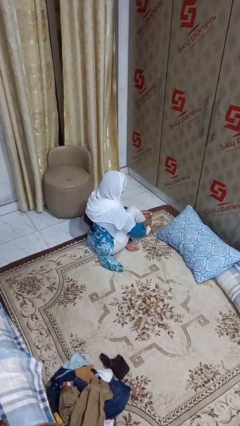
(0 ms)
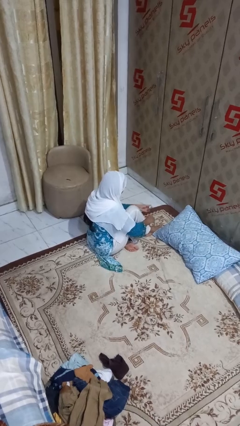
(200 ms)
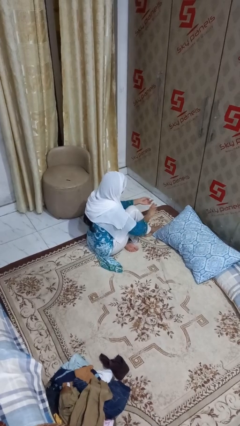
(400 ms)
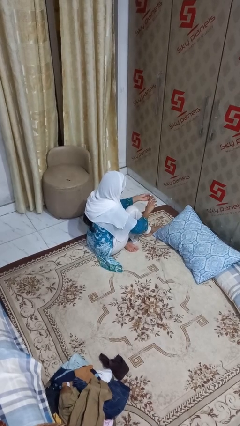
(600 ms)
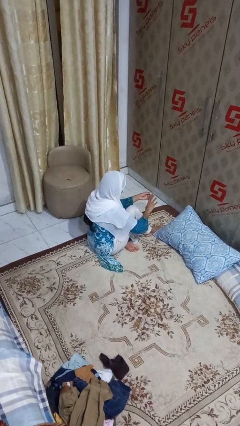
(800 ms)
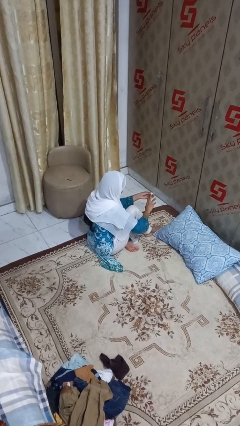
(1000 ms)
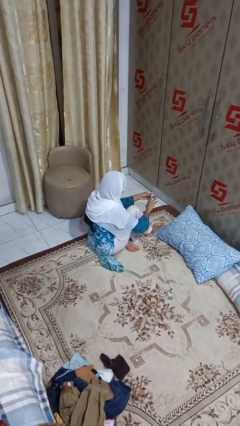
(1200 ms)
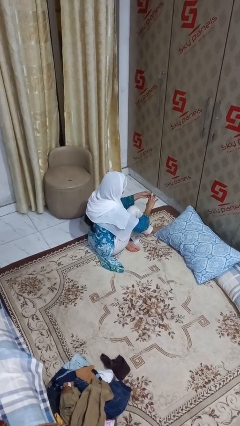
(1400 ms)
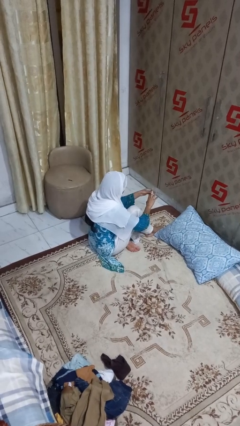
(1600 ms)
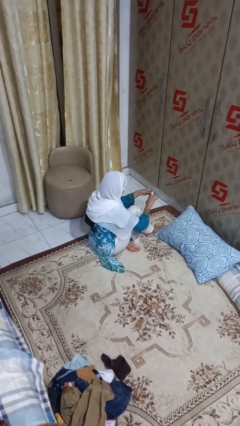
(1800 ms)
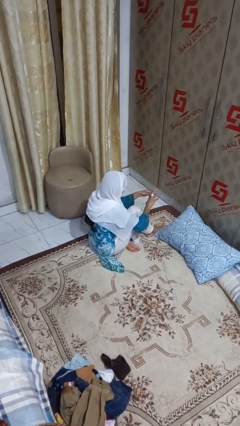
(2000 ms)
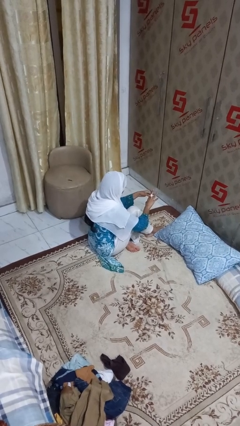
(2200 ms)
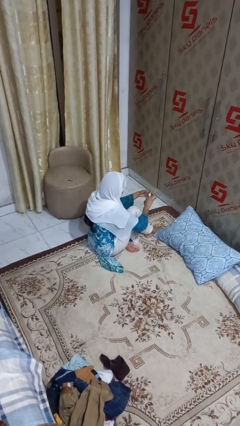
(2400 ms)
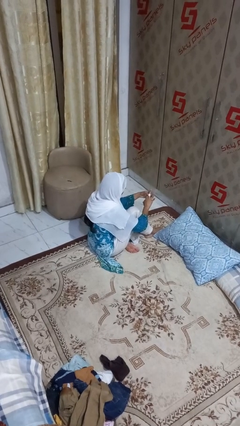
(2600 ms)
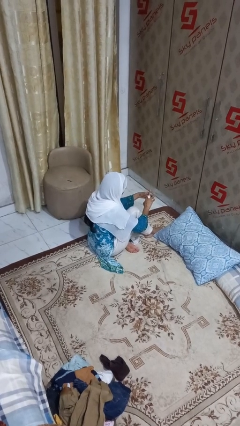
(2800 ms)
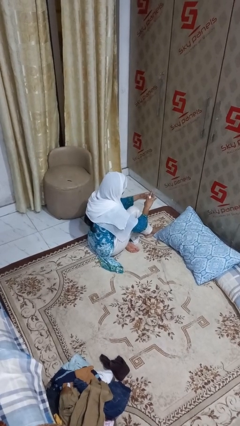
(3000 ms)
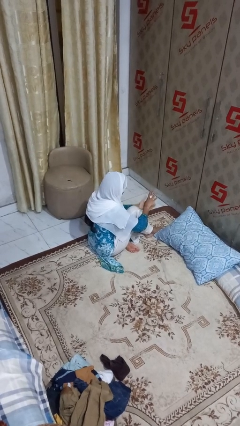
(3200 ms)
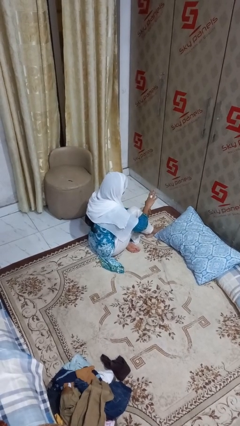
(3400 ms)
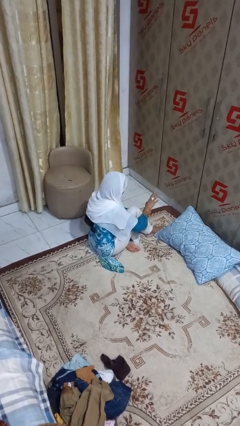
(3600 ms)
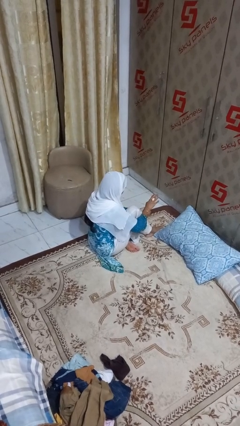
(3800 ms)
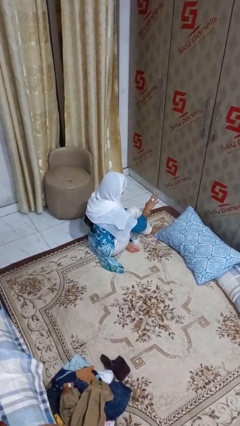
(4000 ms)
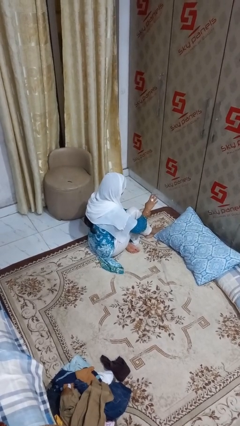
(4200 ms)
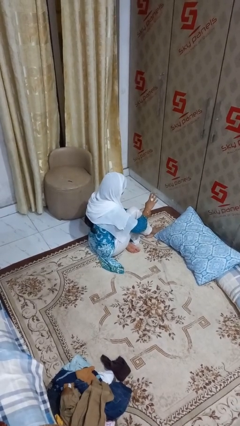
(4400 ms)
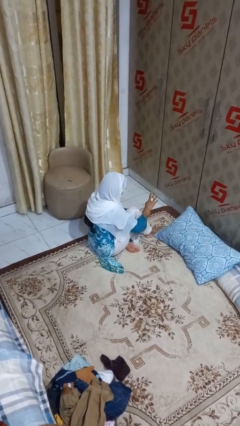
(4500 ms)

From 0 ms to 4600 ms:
person puts on ring

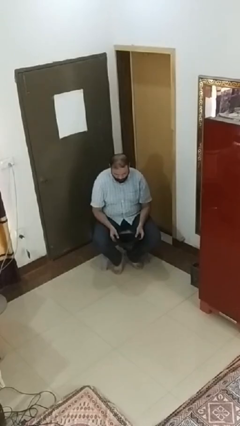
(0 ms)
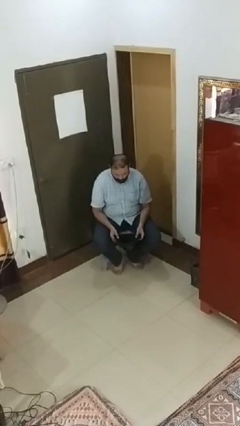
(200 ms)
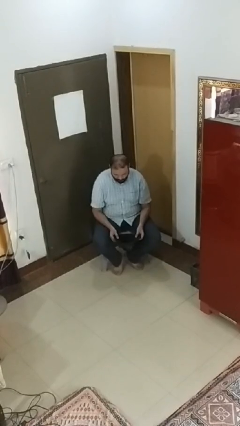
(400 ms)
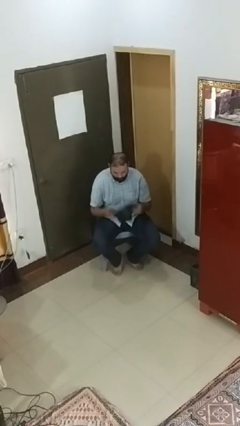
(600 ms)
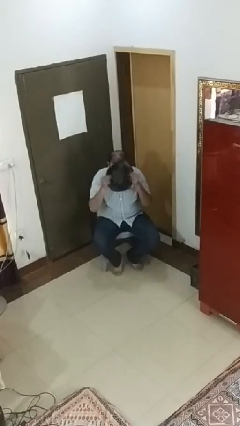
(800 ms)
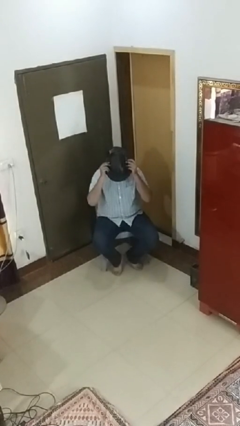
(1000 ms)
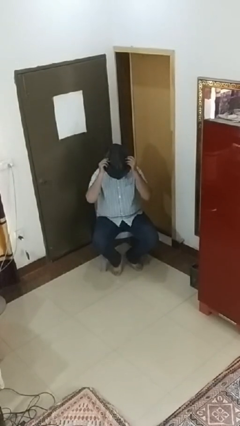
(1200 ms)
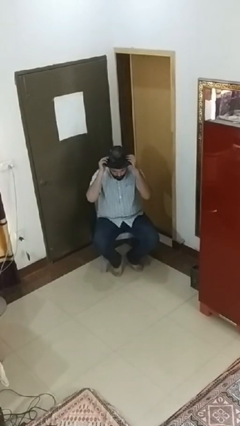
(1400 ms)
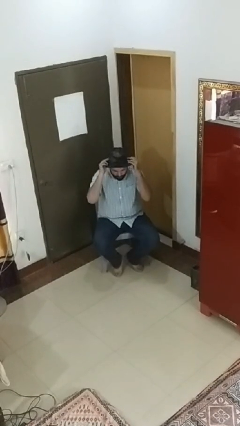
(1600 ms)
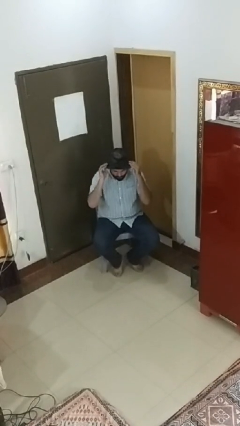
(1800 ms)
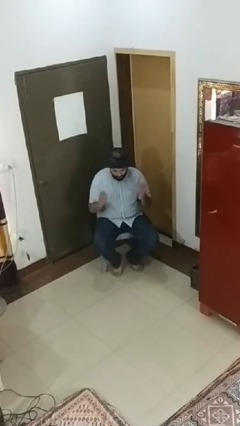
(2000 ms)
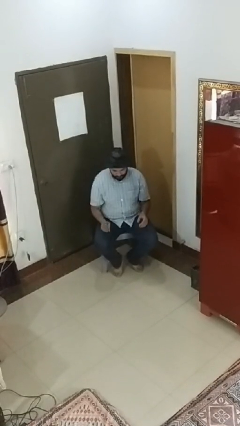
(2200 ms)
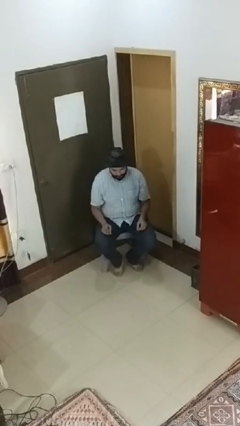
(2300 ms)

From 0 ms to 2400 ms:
person puts on hat

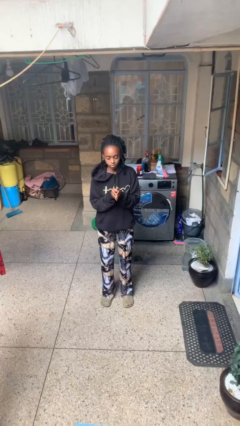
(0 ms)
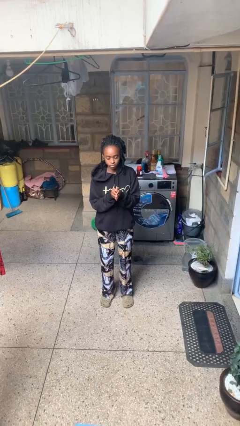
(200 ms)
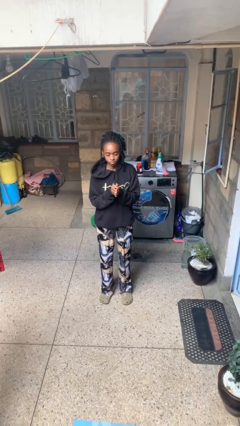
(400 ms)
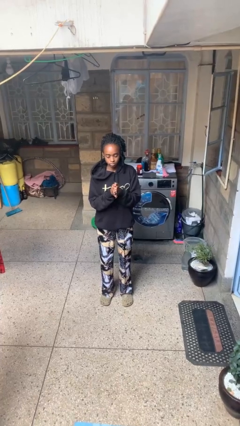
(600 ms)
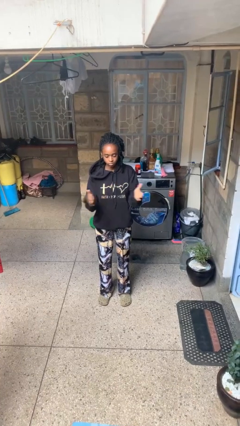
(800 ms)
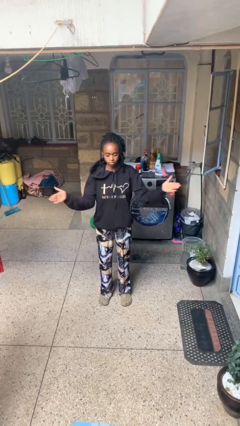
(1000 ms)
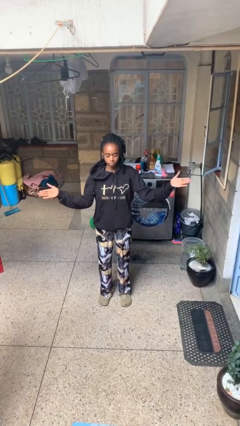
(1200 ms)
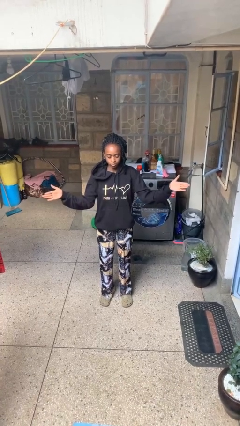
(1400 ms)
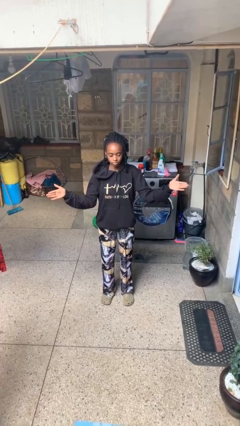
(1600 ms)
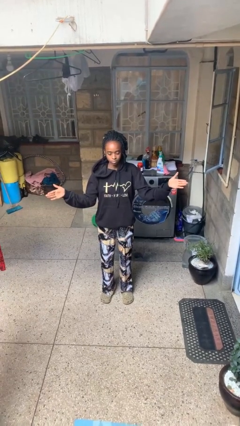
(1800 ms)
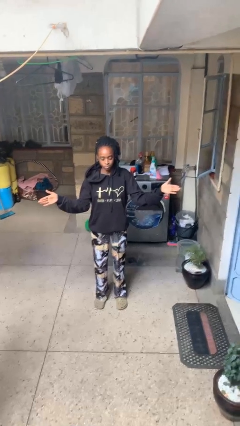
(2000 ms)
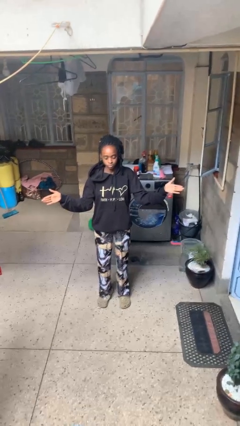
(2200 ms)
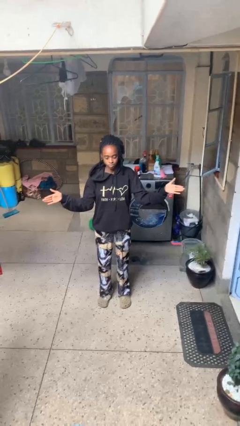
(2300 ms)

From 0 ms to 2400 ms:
person gestures zoom in

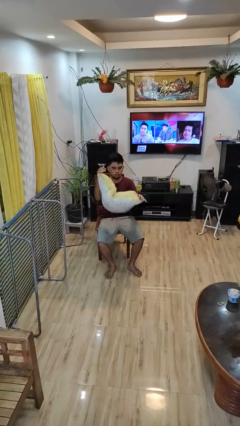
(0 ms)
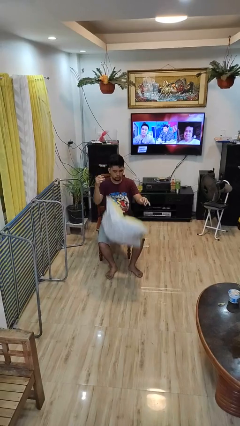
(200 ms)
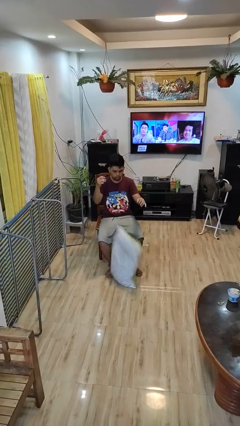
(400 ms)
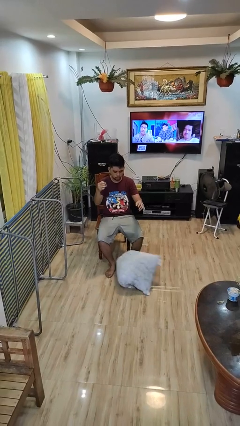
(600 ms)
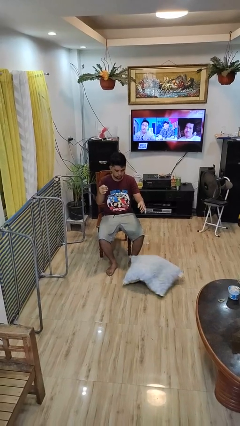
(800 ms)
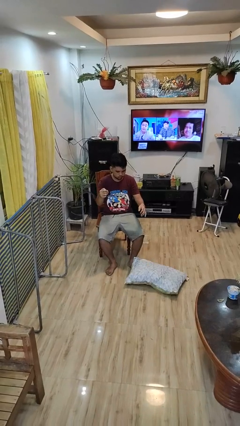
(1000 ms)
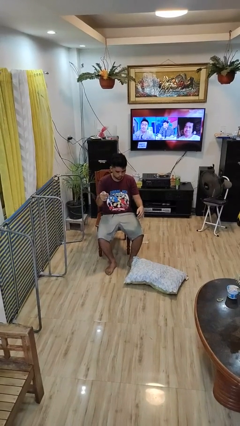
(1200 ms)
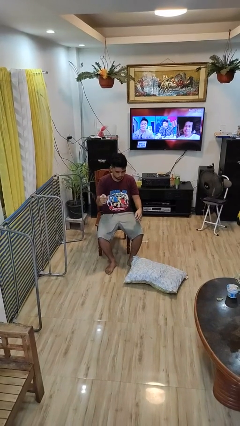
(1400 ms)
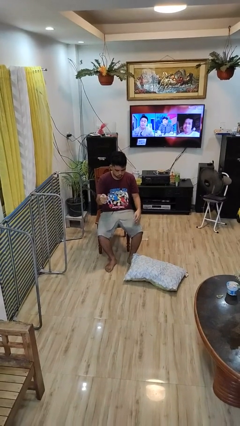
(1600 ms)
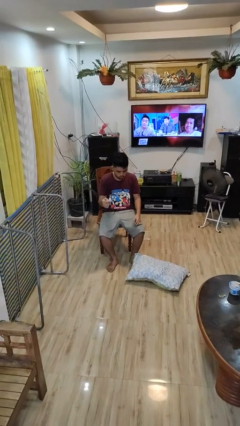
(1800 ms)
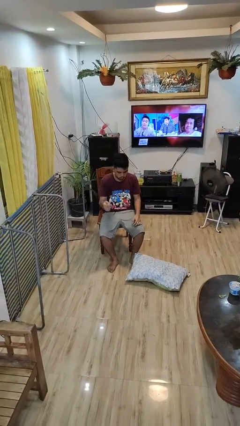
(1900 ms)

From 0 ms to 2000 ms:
person drops object

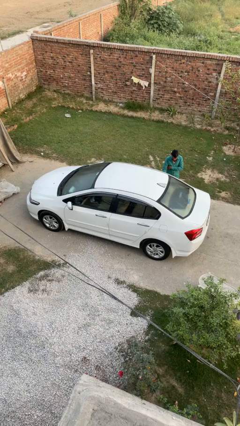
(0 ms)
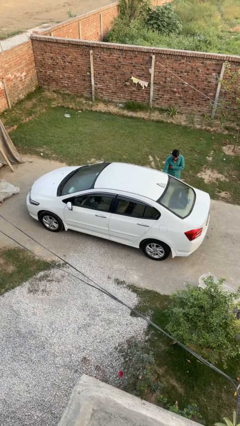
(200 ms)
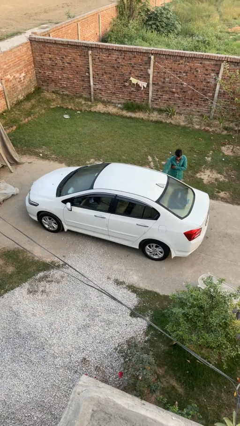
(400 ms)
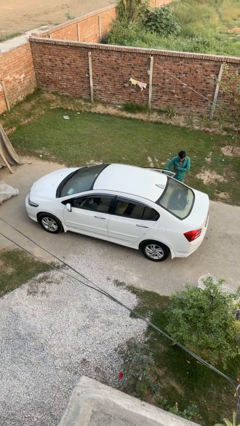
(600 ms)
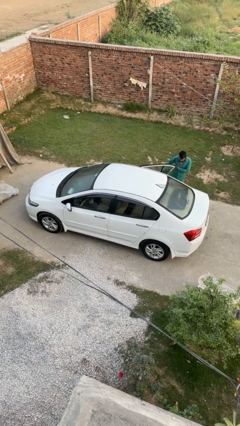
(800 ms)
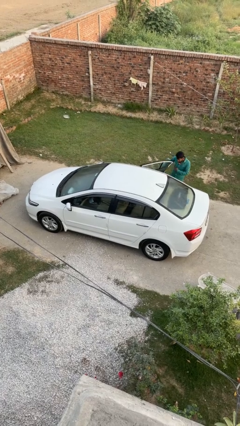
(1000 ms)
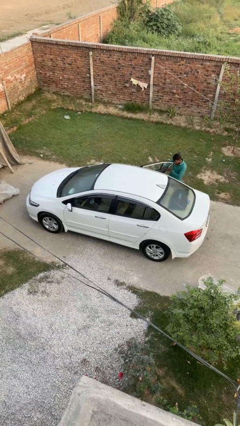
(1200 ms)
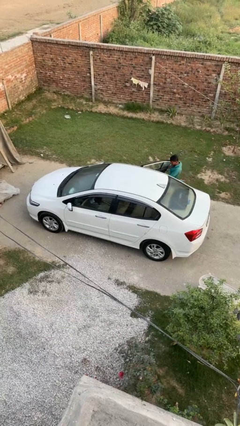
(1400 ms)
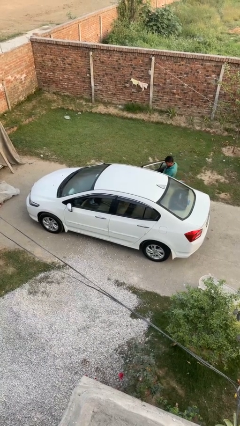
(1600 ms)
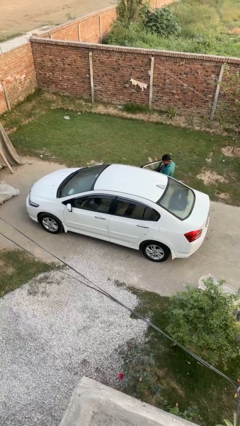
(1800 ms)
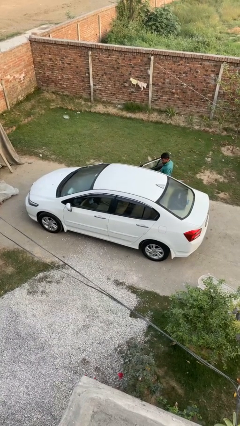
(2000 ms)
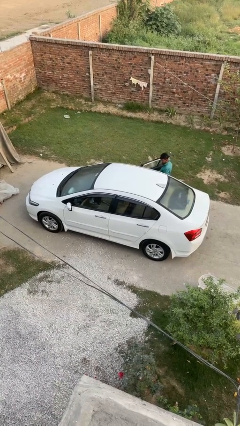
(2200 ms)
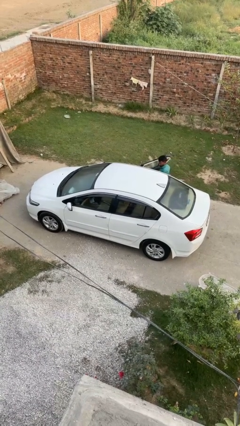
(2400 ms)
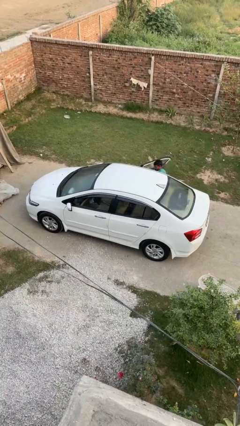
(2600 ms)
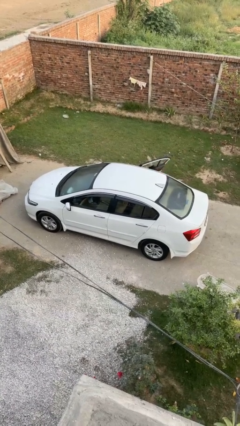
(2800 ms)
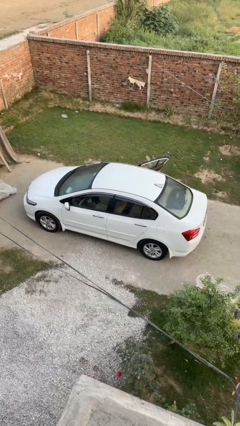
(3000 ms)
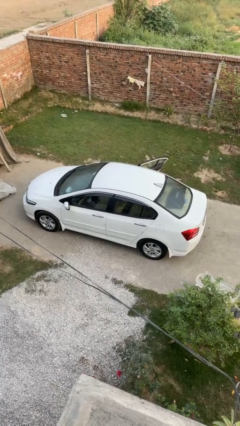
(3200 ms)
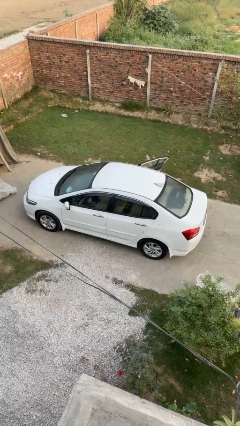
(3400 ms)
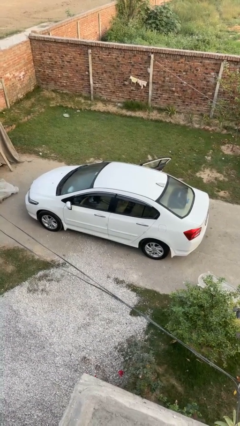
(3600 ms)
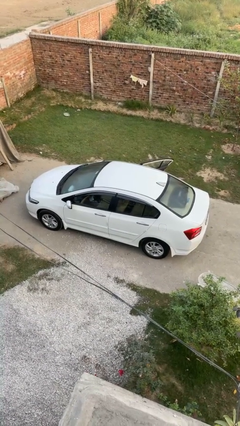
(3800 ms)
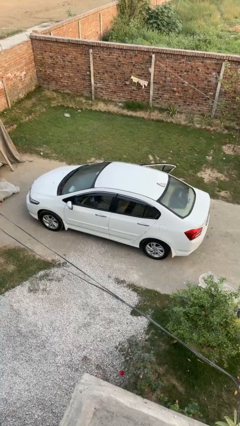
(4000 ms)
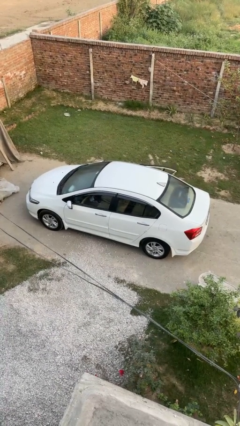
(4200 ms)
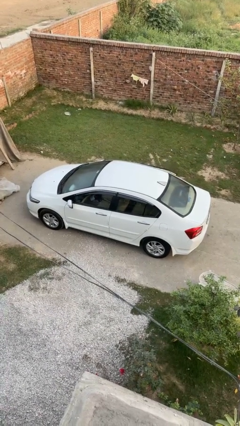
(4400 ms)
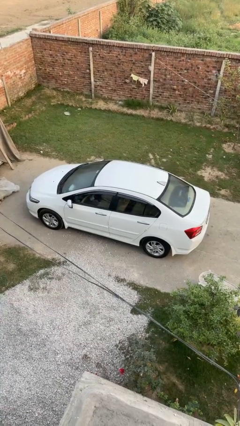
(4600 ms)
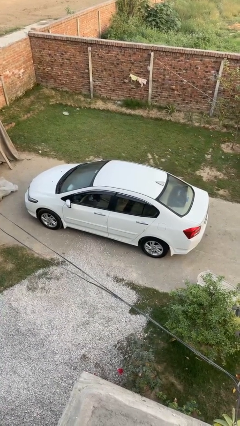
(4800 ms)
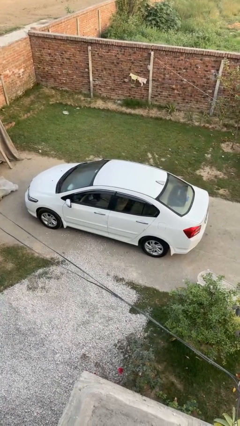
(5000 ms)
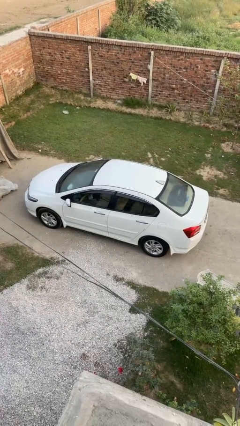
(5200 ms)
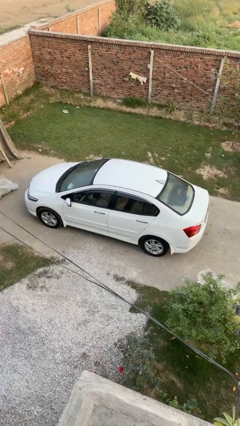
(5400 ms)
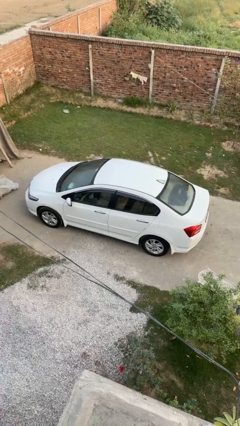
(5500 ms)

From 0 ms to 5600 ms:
car picks up person

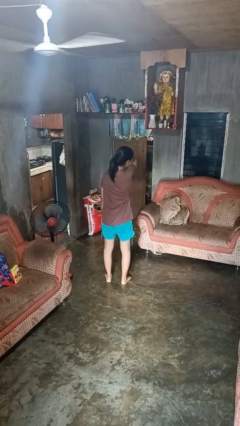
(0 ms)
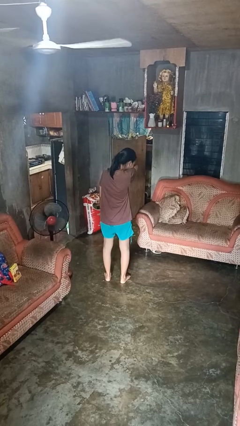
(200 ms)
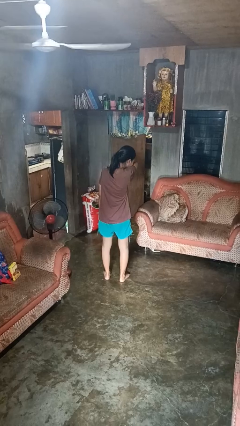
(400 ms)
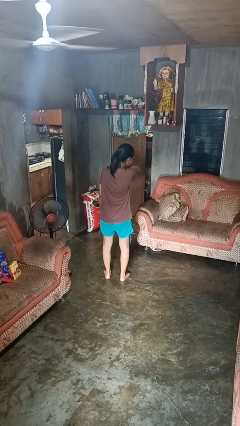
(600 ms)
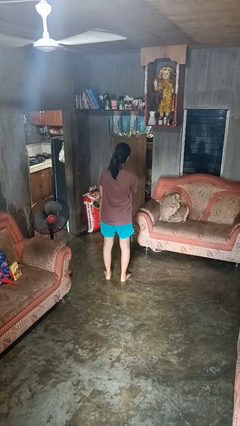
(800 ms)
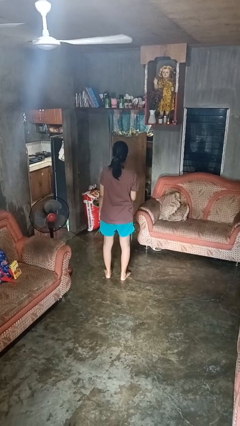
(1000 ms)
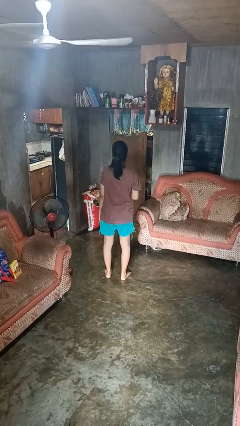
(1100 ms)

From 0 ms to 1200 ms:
person sneezes into arm
